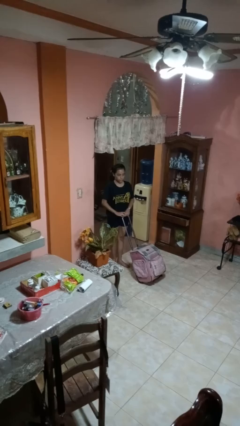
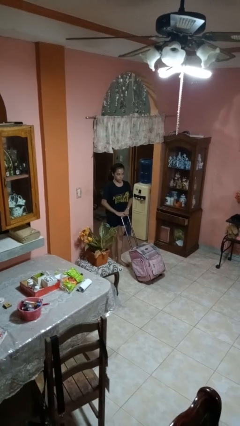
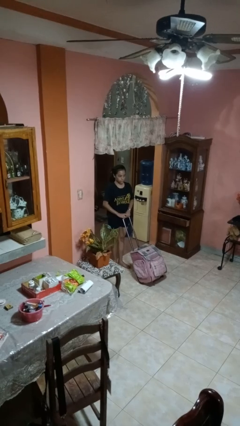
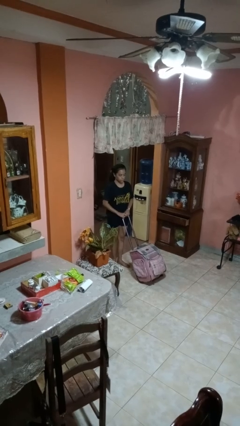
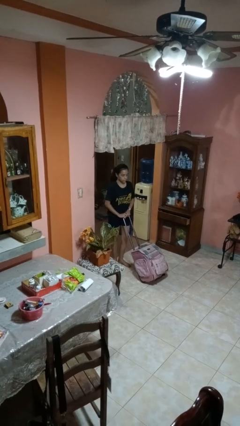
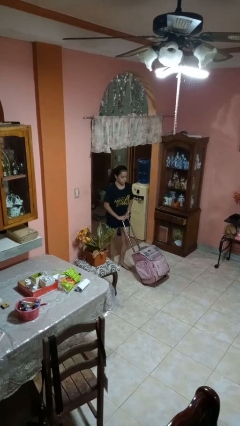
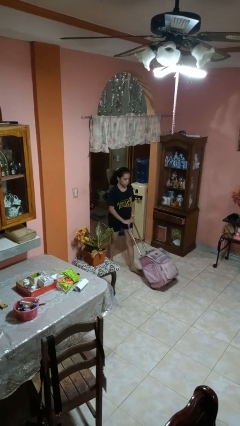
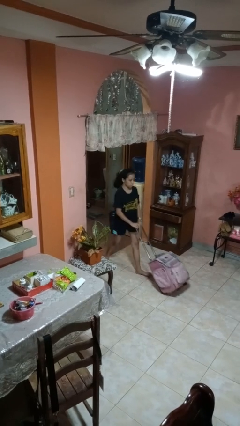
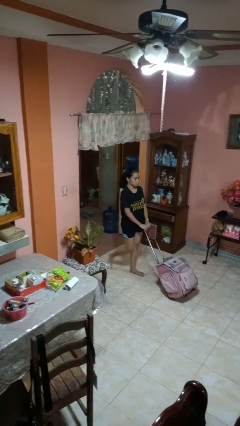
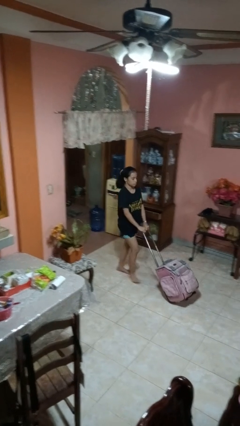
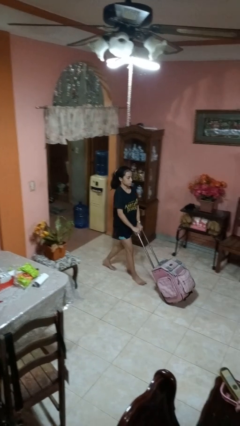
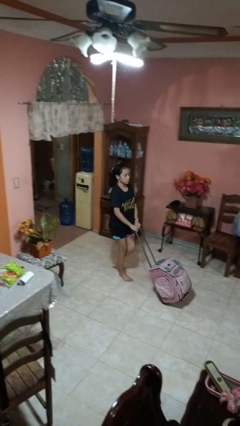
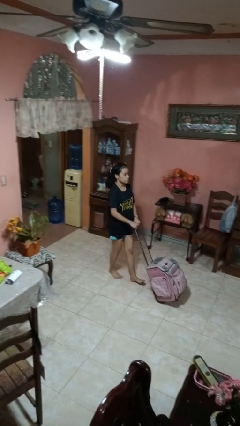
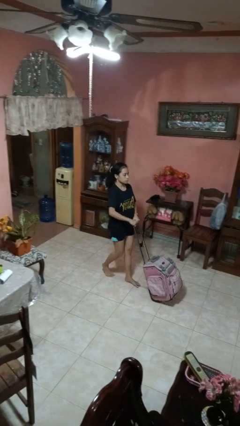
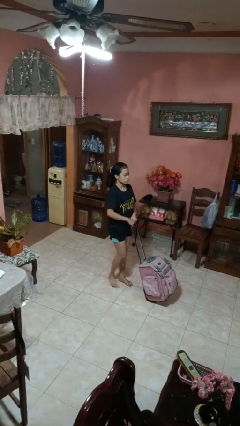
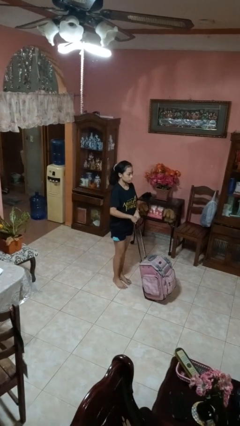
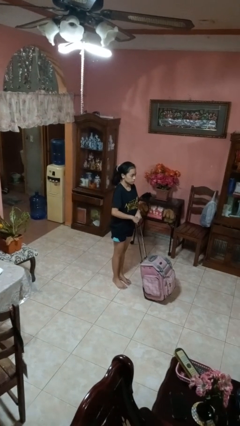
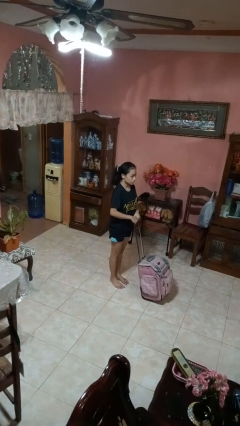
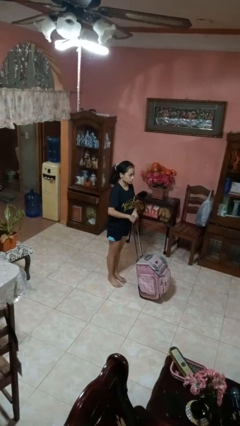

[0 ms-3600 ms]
person pushes wheeled cart

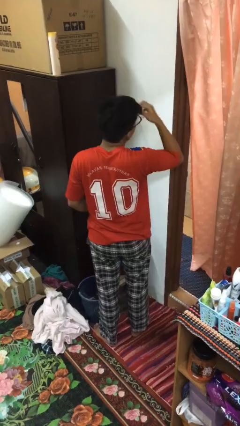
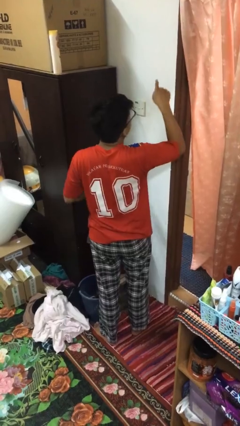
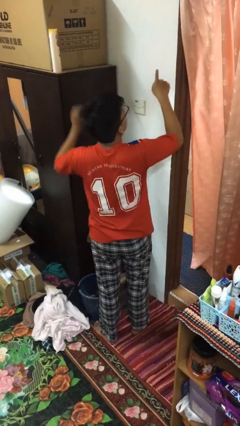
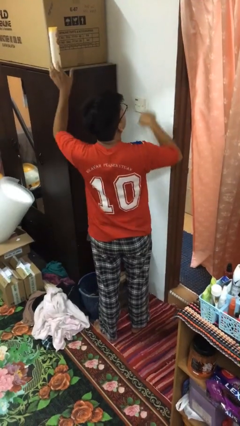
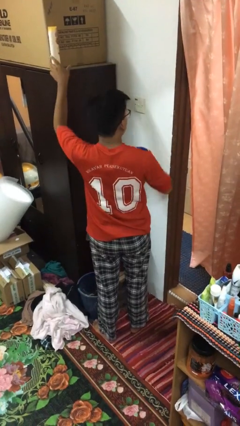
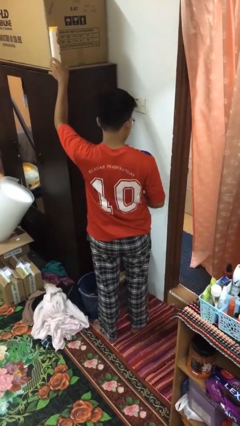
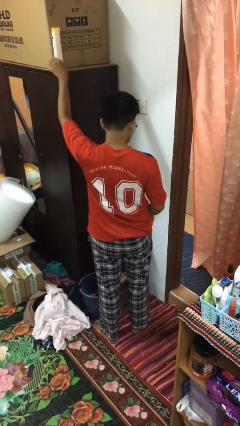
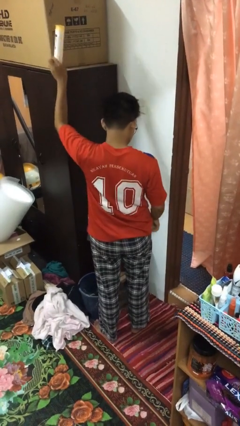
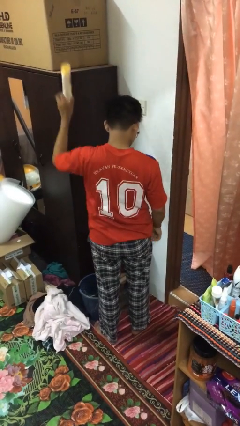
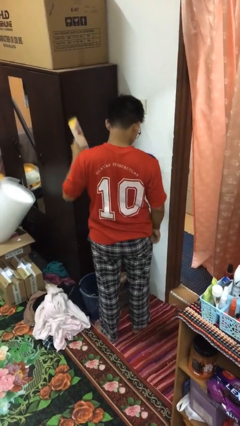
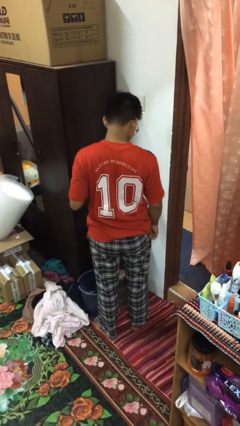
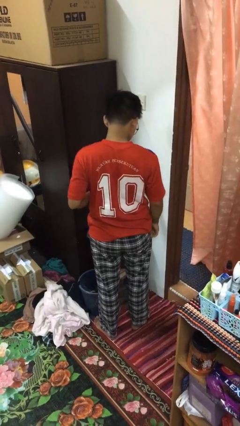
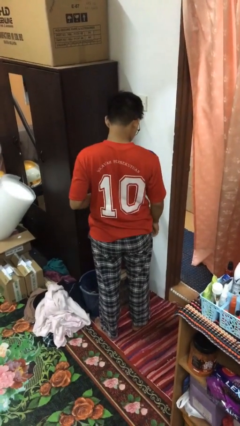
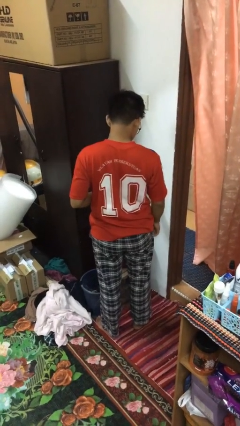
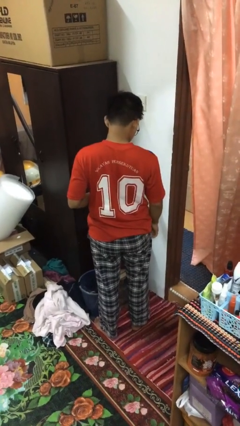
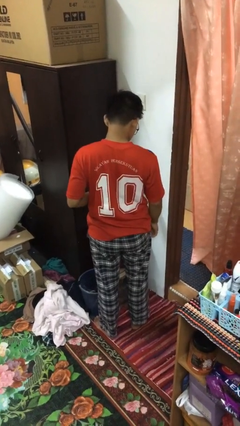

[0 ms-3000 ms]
person picks up object from shelf

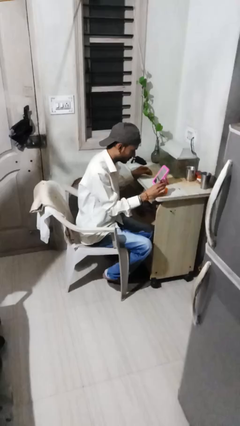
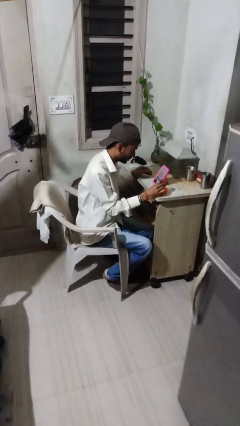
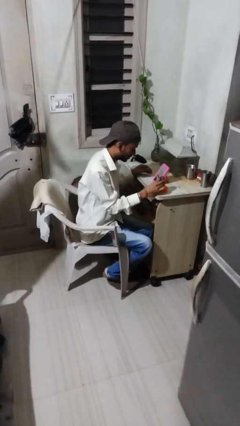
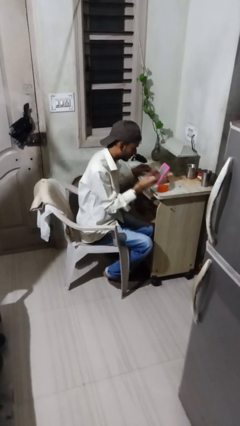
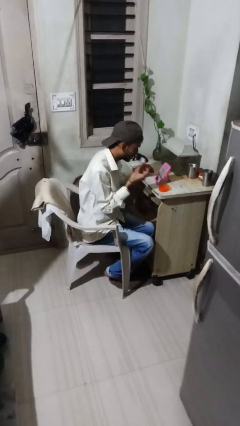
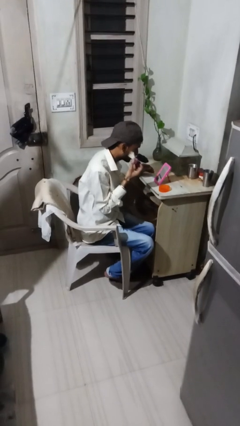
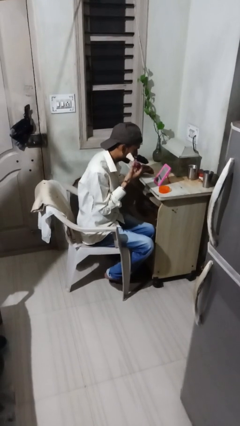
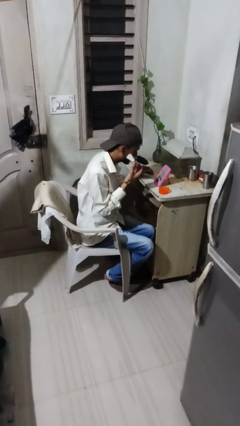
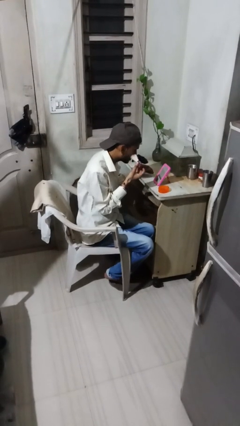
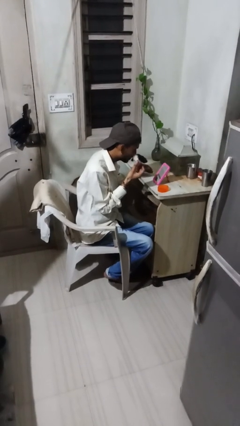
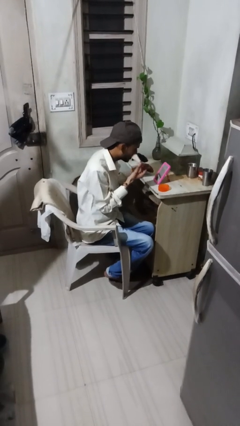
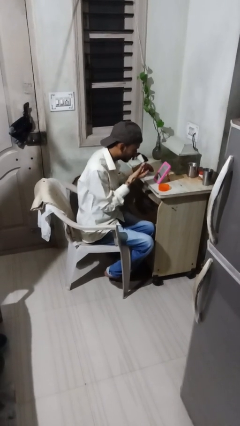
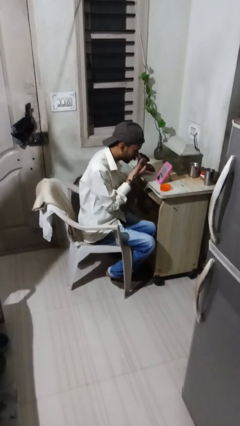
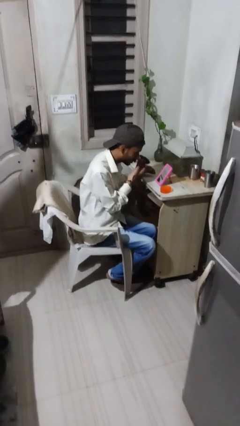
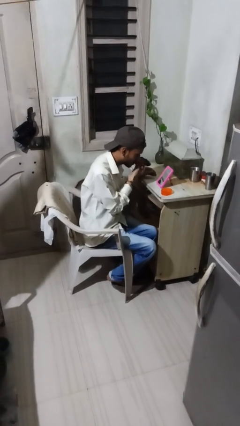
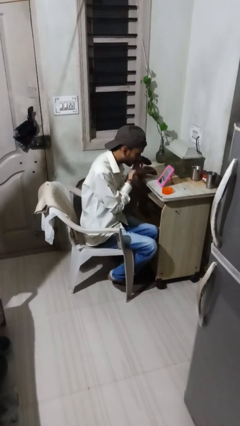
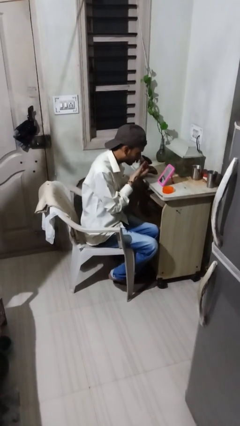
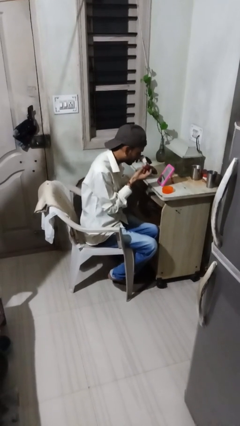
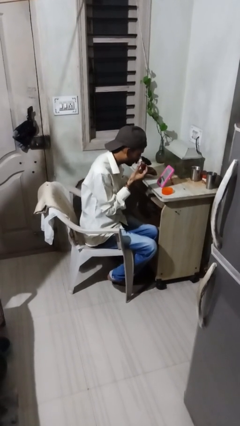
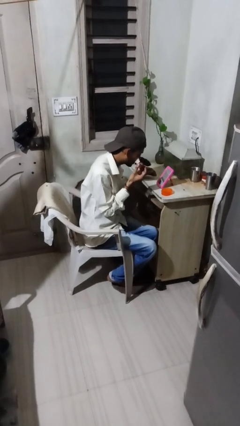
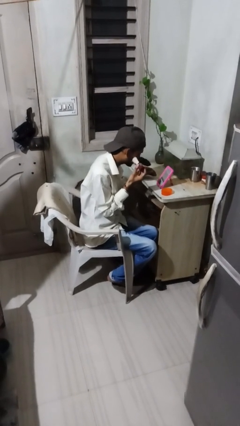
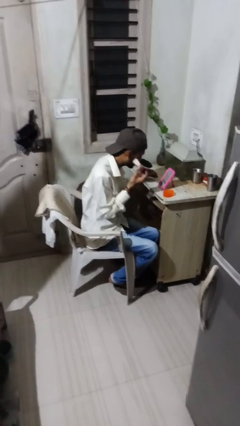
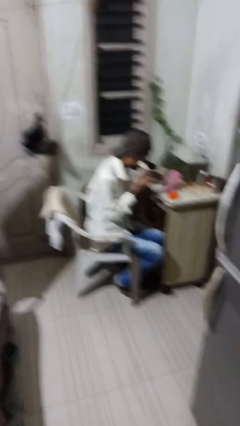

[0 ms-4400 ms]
person applies foundation makeup

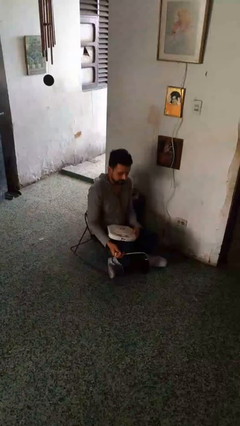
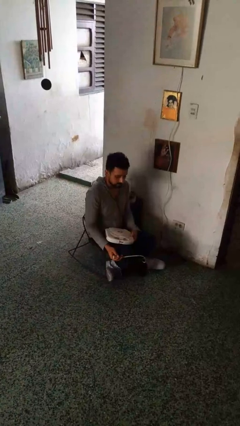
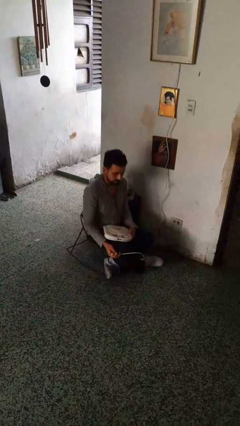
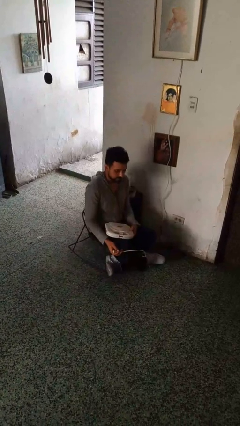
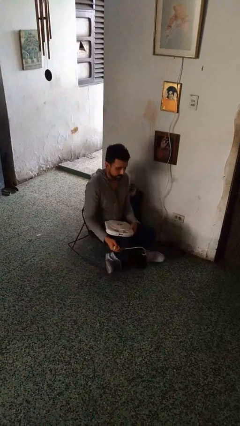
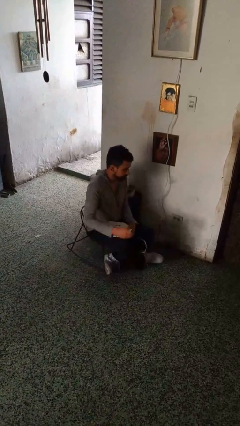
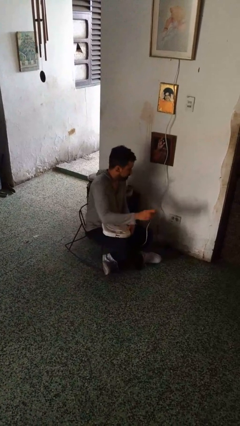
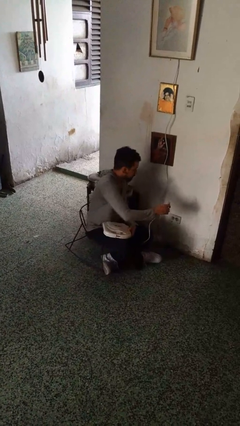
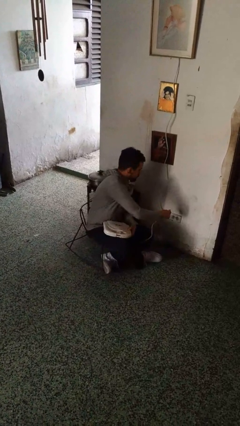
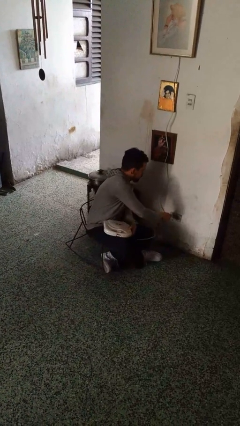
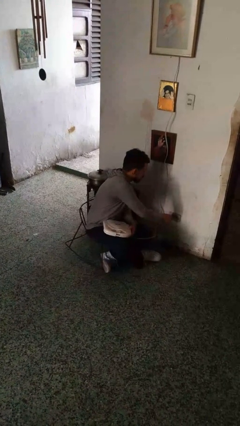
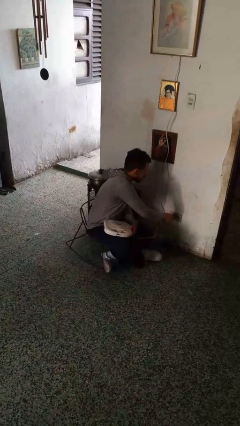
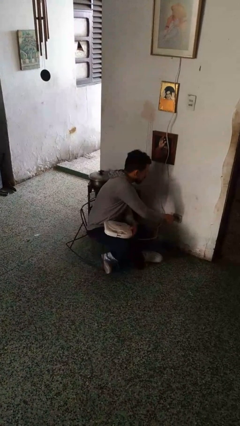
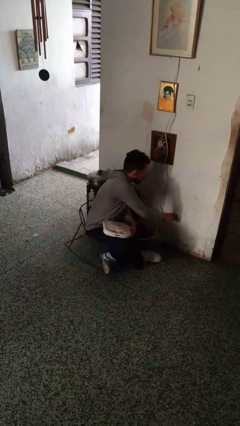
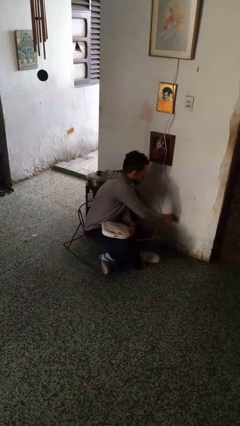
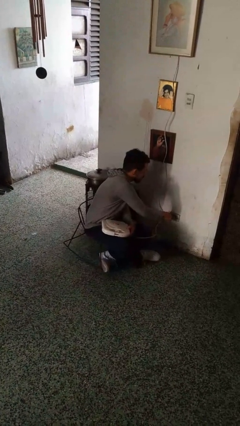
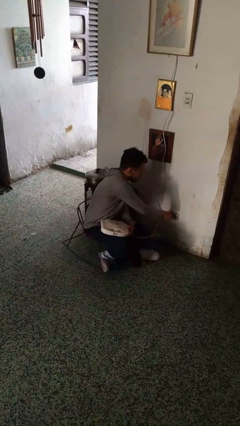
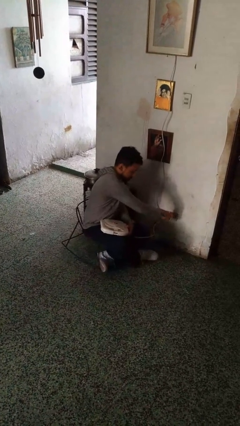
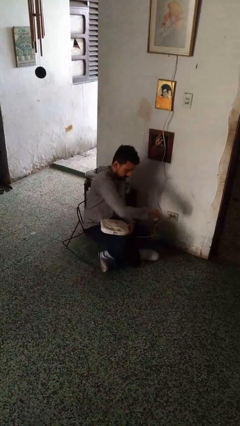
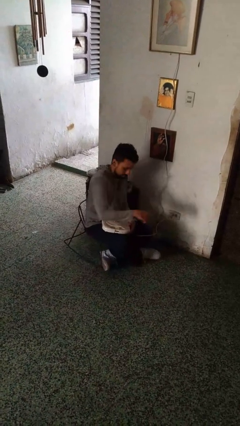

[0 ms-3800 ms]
person plugs into electrical socket

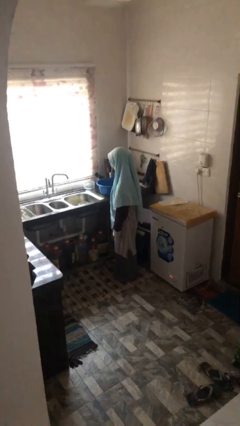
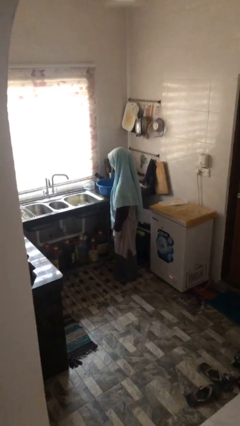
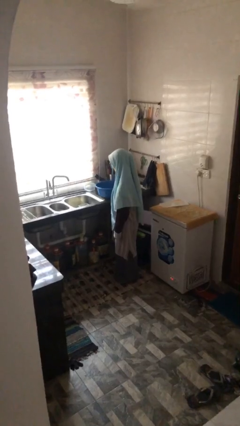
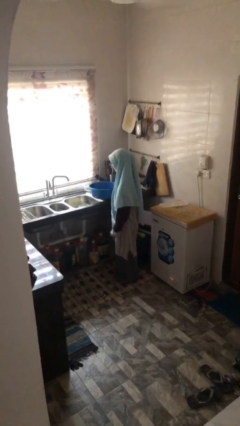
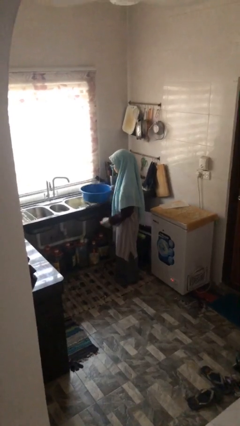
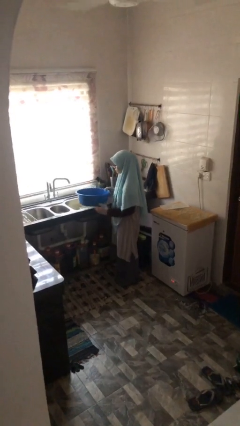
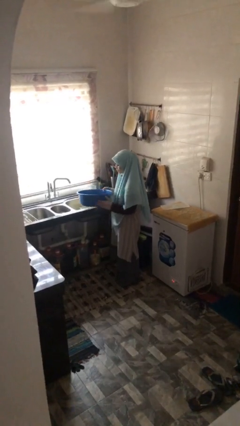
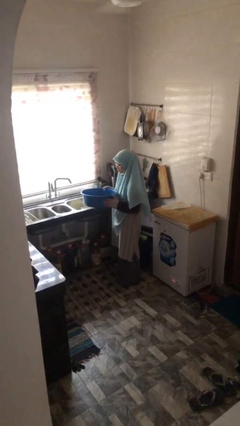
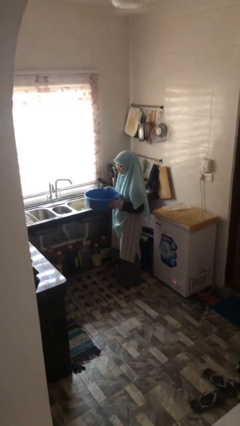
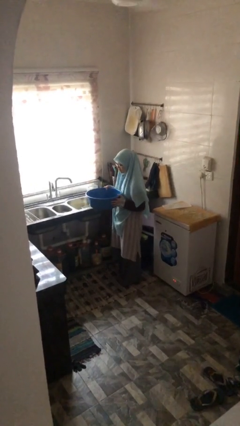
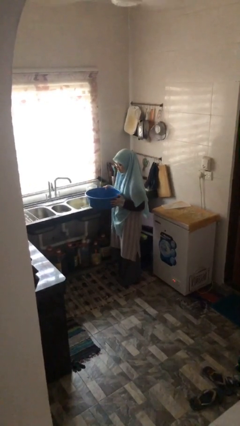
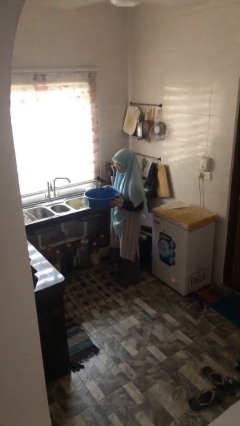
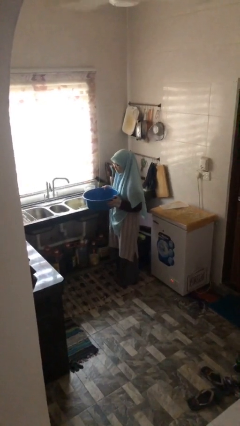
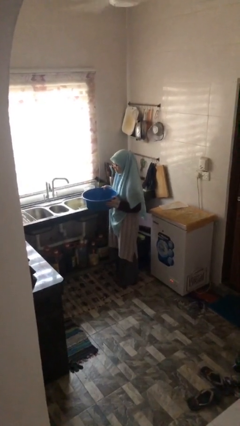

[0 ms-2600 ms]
person picks up object from countertop

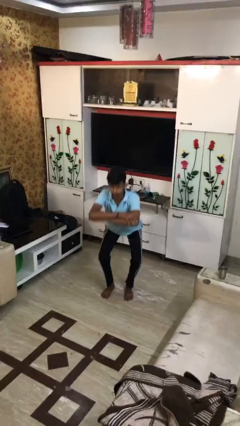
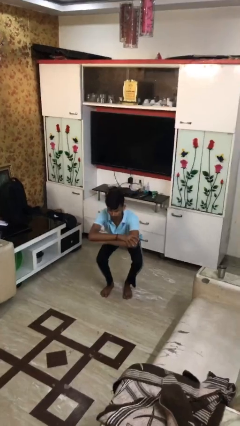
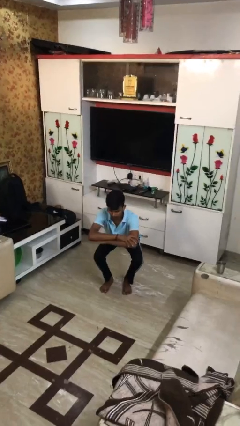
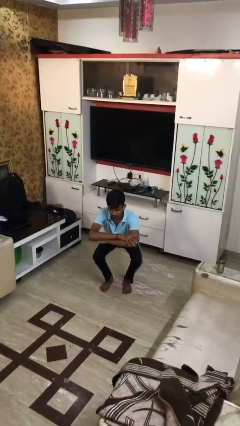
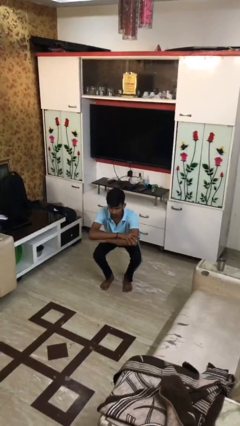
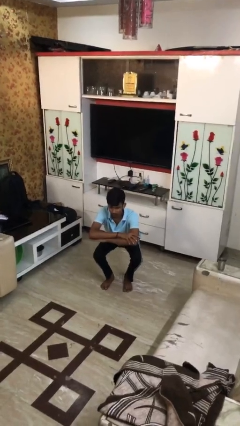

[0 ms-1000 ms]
person squats
